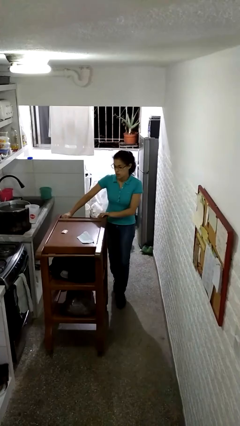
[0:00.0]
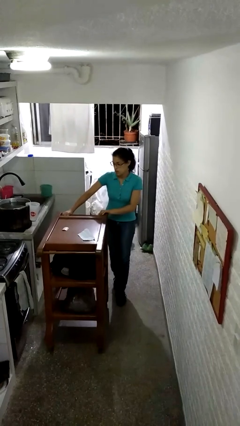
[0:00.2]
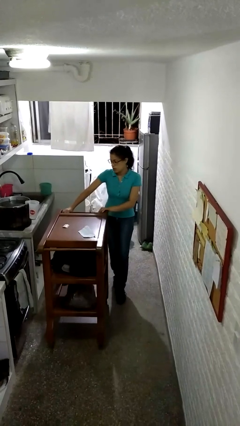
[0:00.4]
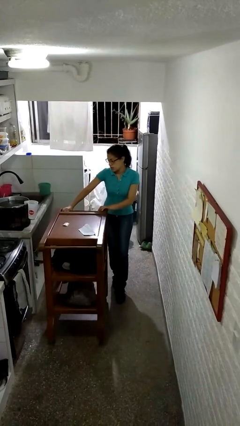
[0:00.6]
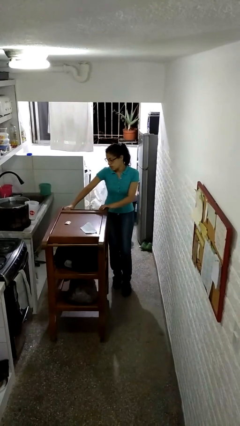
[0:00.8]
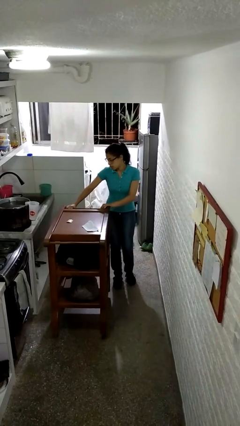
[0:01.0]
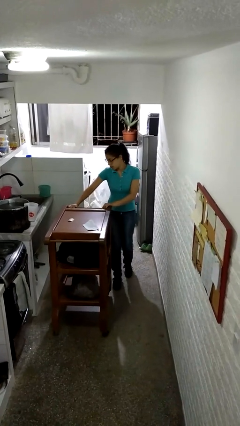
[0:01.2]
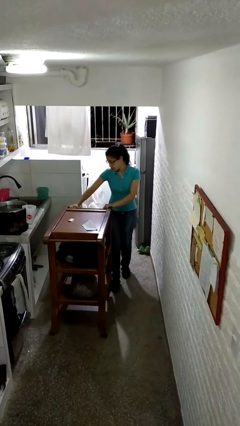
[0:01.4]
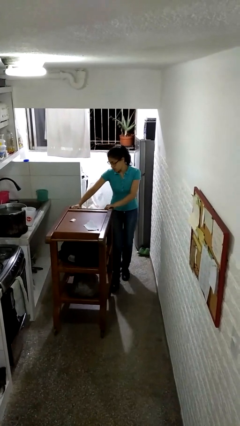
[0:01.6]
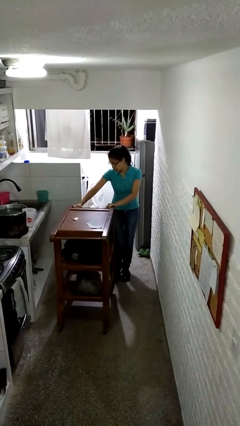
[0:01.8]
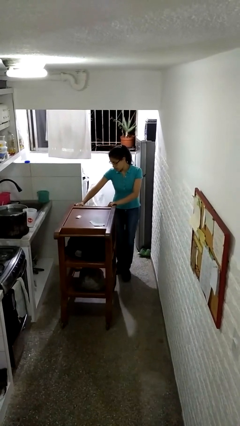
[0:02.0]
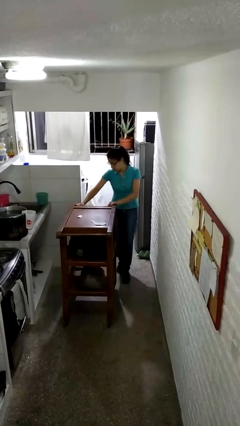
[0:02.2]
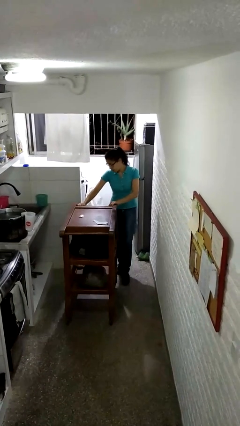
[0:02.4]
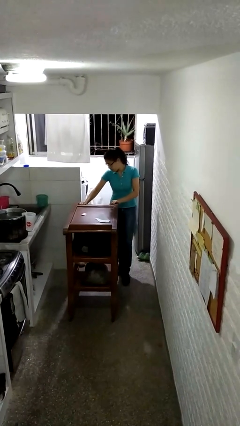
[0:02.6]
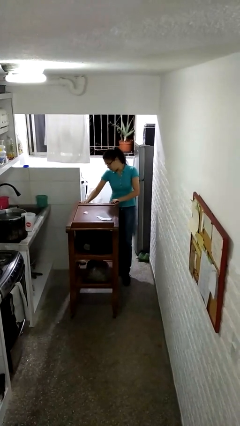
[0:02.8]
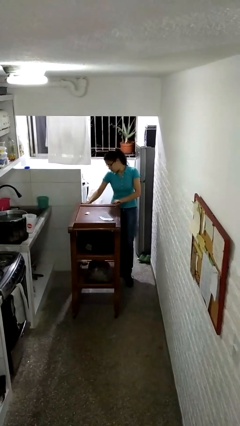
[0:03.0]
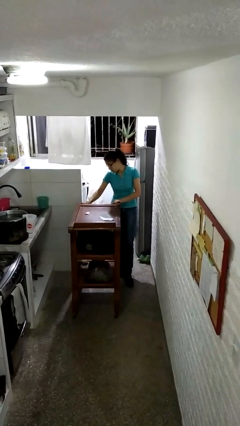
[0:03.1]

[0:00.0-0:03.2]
person pulls wheeled cart

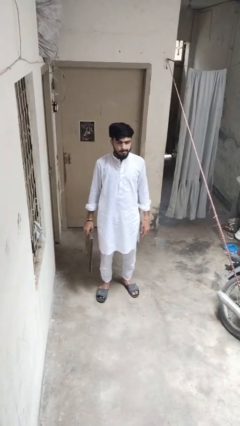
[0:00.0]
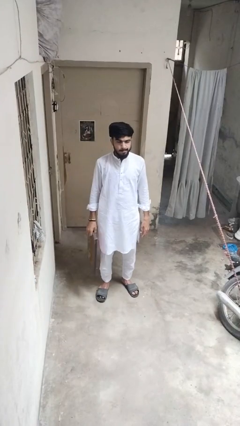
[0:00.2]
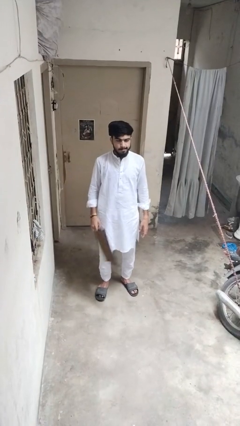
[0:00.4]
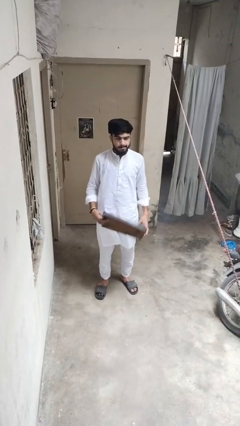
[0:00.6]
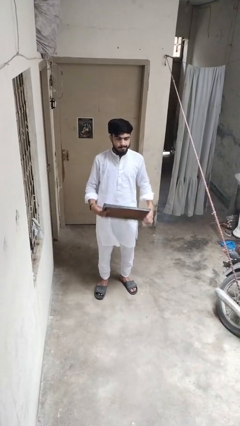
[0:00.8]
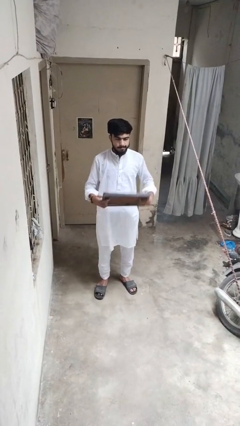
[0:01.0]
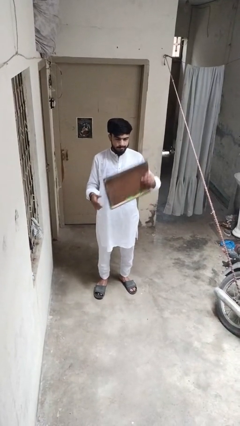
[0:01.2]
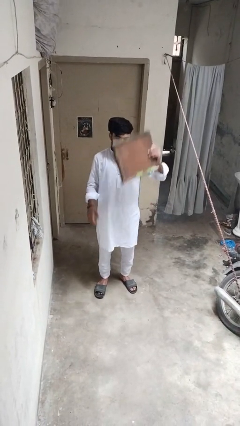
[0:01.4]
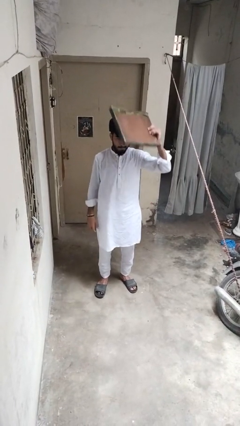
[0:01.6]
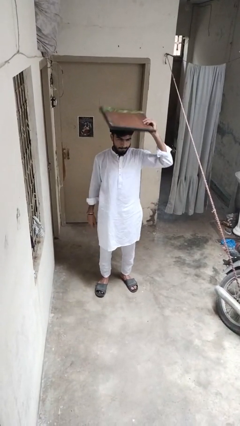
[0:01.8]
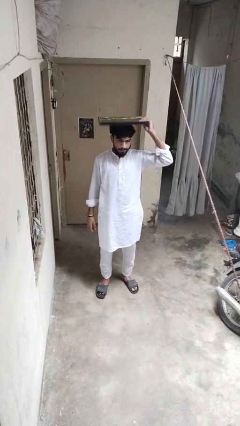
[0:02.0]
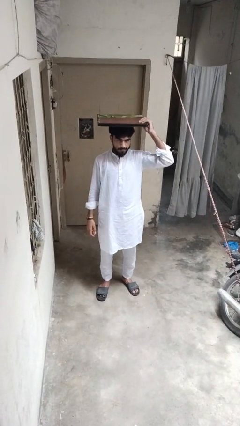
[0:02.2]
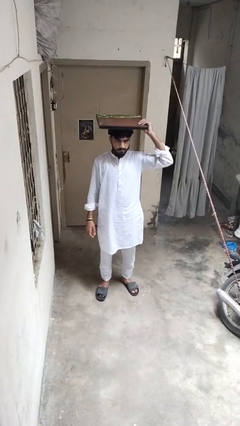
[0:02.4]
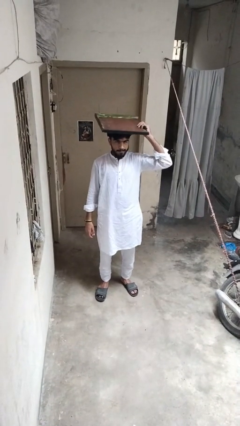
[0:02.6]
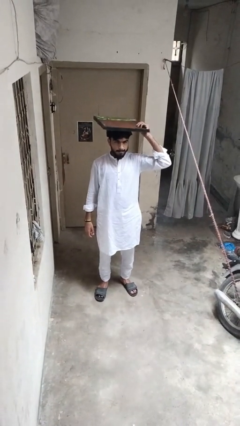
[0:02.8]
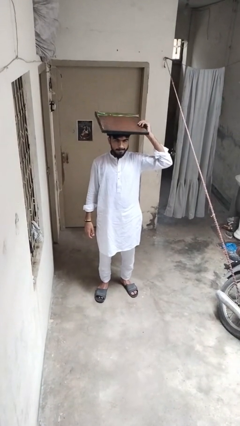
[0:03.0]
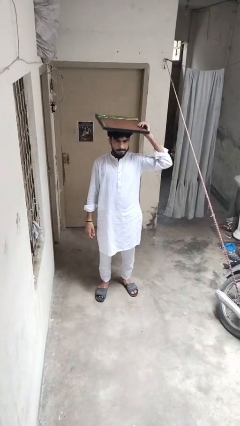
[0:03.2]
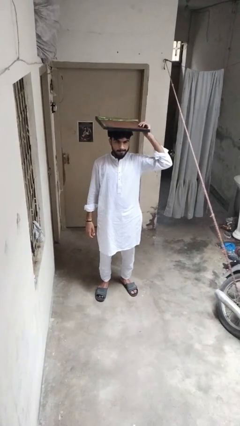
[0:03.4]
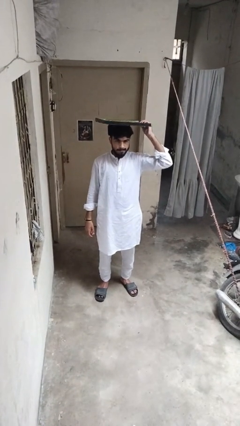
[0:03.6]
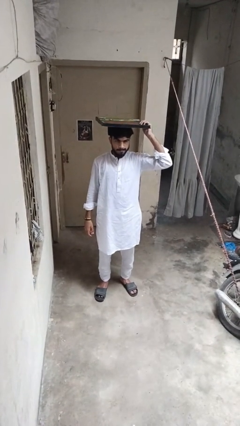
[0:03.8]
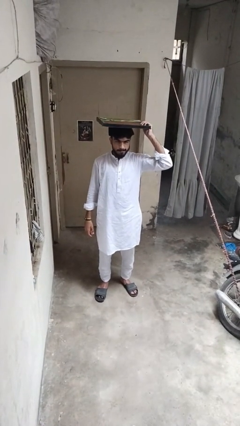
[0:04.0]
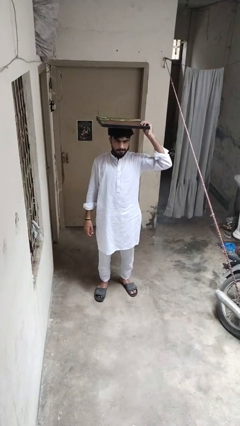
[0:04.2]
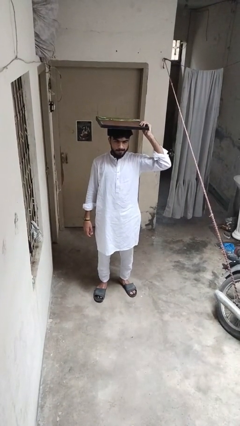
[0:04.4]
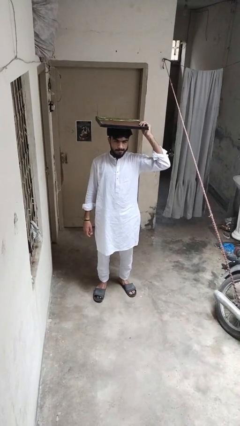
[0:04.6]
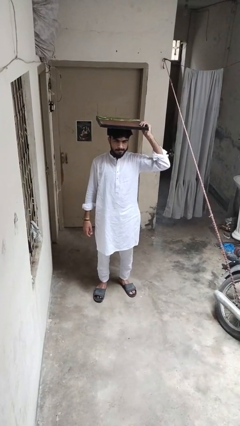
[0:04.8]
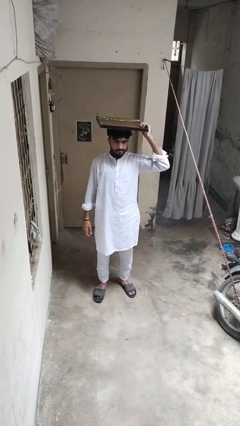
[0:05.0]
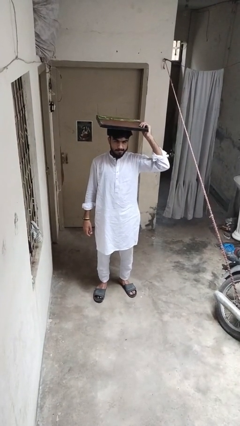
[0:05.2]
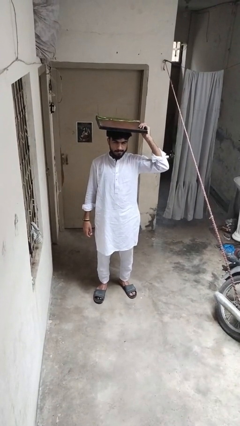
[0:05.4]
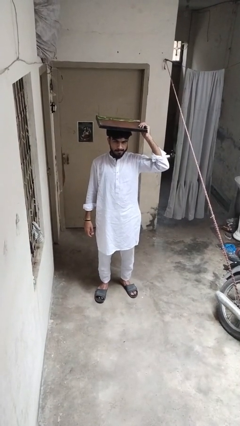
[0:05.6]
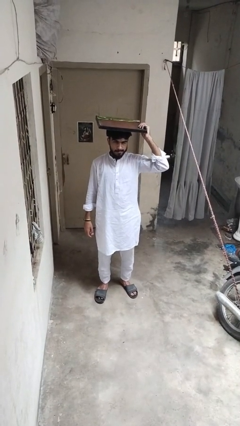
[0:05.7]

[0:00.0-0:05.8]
person holds object above head

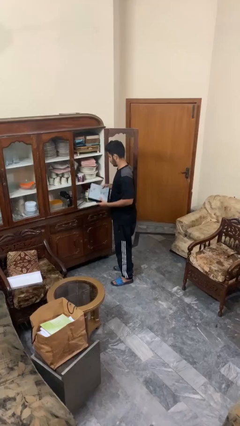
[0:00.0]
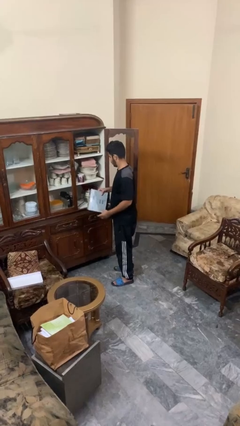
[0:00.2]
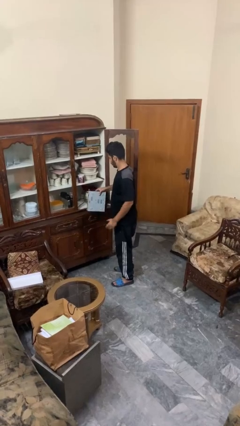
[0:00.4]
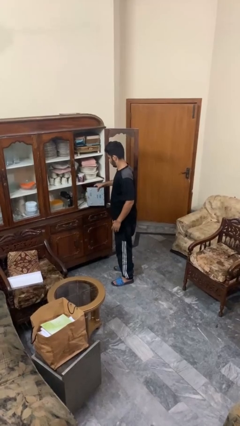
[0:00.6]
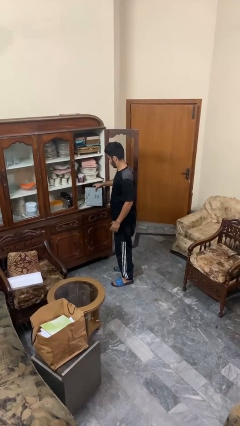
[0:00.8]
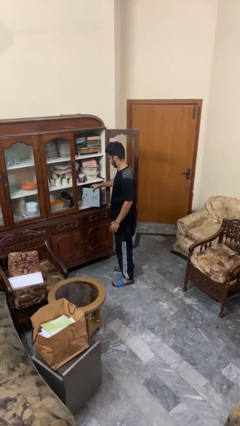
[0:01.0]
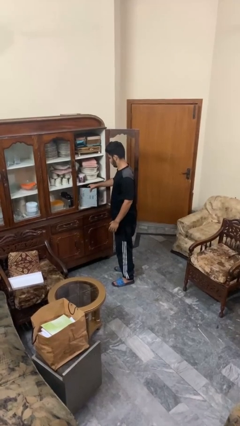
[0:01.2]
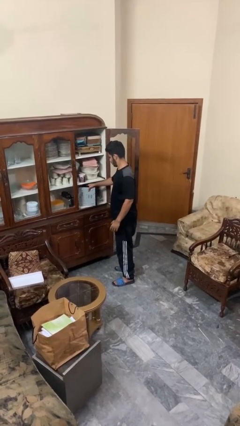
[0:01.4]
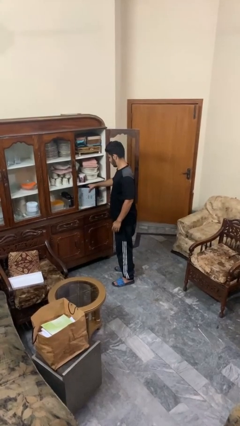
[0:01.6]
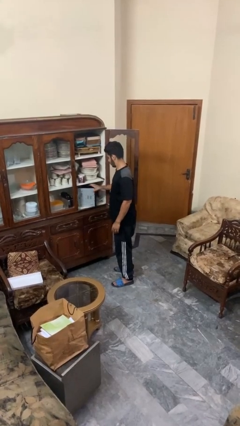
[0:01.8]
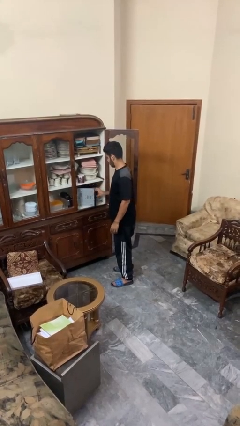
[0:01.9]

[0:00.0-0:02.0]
person puts down object into cabinet

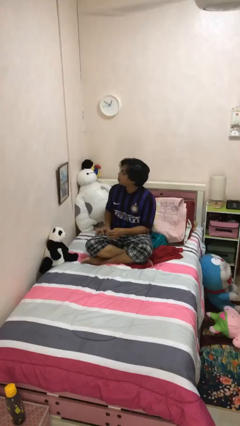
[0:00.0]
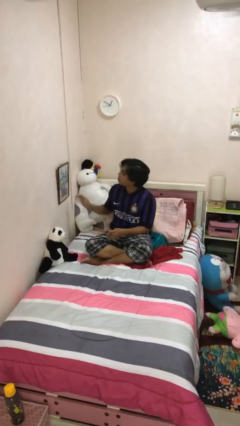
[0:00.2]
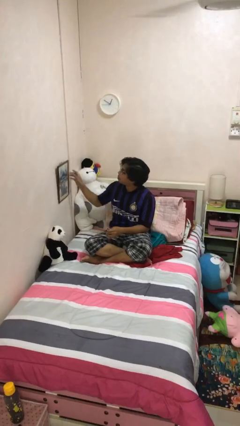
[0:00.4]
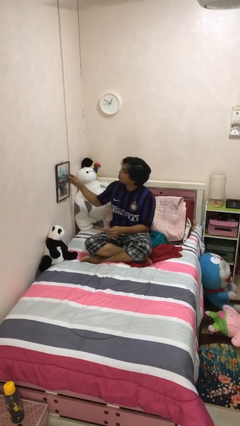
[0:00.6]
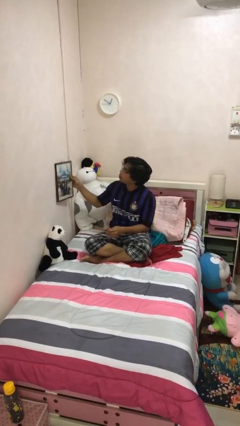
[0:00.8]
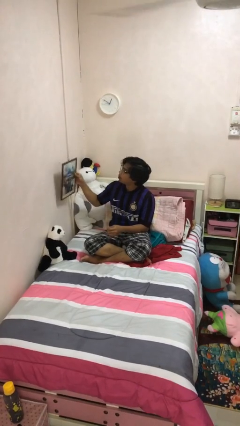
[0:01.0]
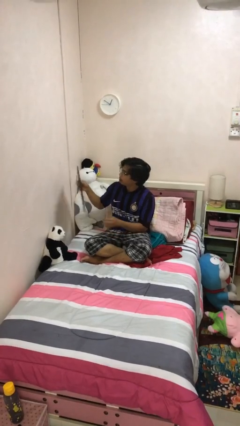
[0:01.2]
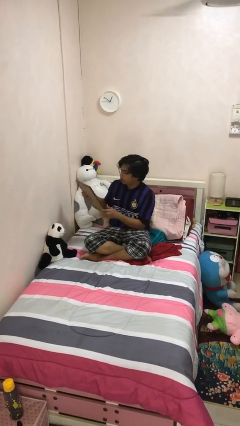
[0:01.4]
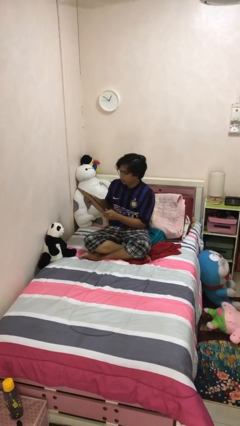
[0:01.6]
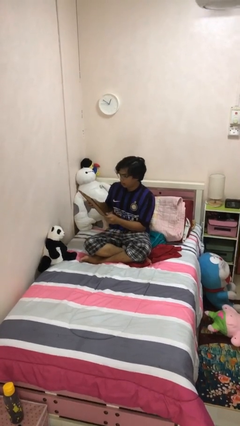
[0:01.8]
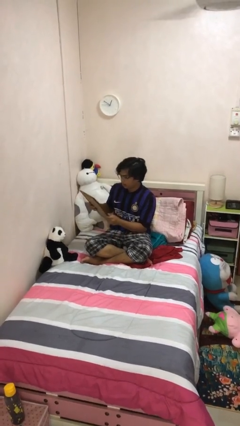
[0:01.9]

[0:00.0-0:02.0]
person takes down picture frame

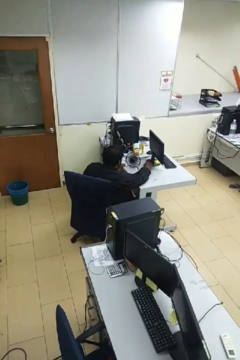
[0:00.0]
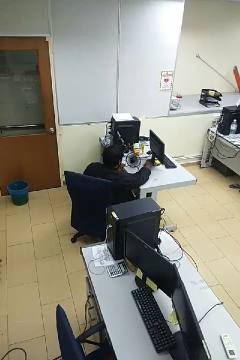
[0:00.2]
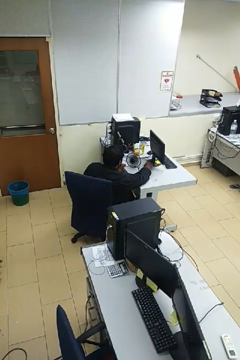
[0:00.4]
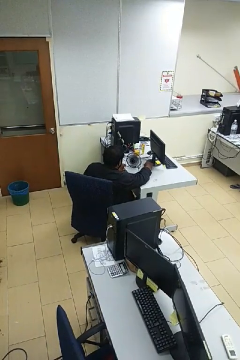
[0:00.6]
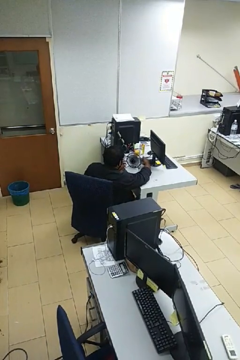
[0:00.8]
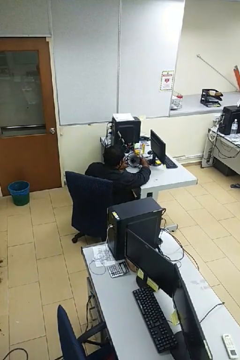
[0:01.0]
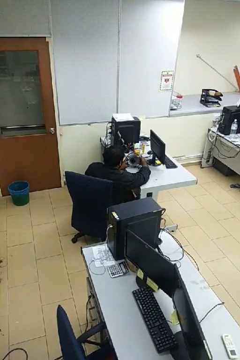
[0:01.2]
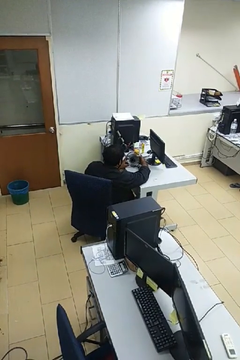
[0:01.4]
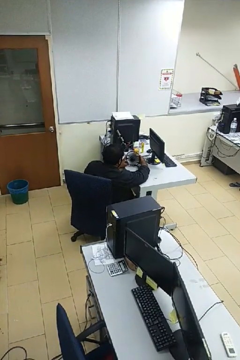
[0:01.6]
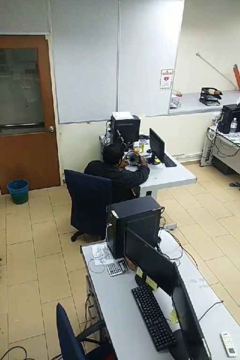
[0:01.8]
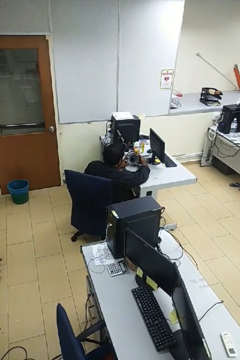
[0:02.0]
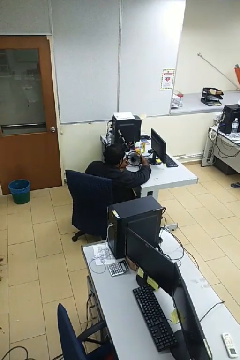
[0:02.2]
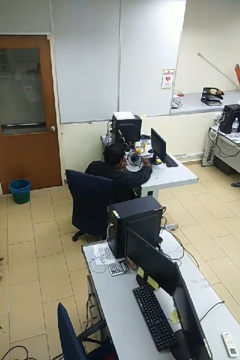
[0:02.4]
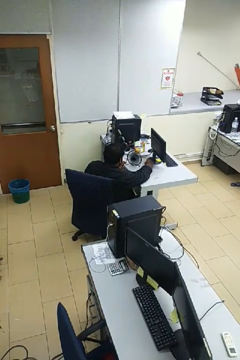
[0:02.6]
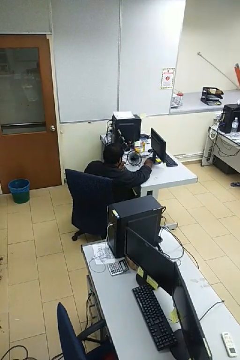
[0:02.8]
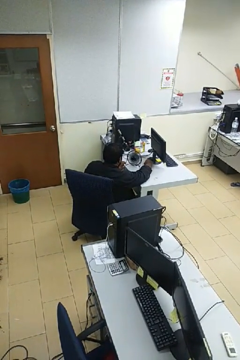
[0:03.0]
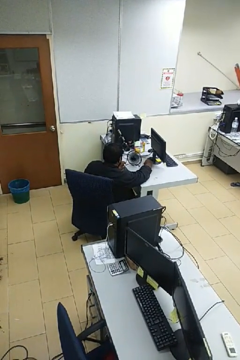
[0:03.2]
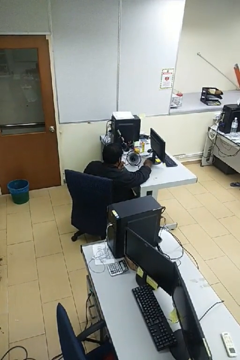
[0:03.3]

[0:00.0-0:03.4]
person turns off fan

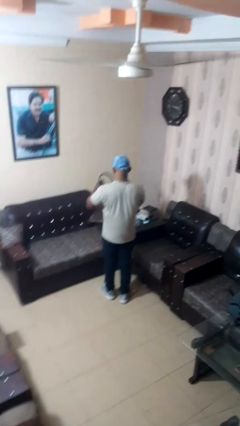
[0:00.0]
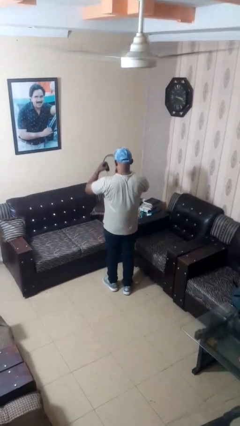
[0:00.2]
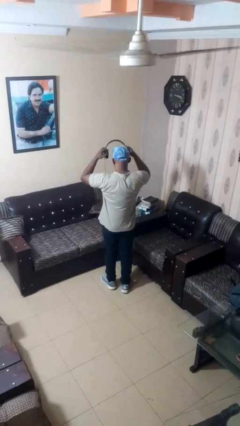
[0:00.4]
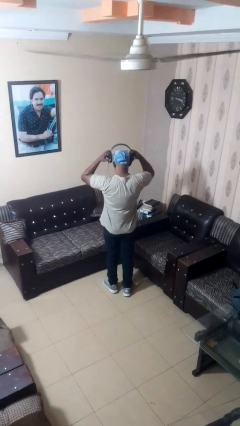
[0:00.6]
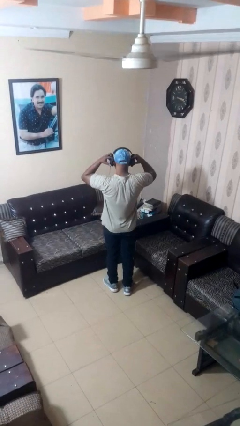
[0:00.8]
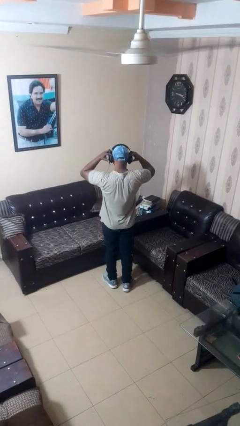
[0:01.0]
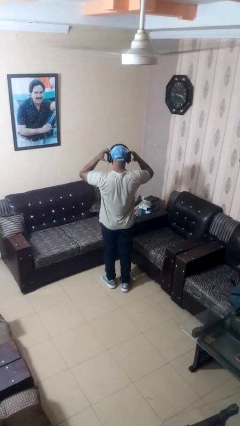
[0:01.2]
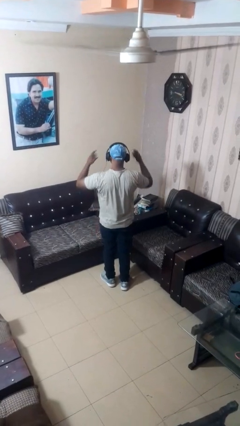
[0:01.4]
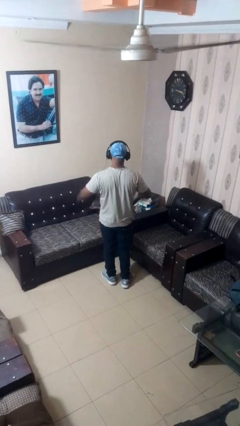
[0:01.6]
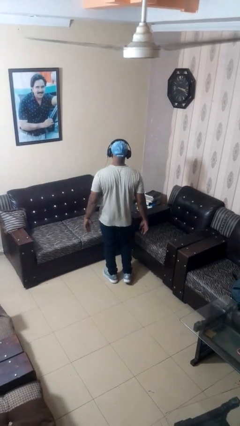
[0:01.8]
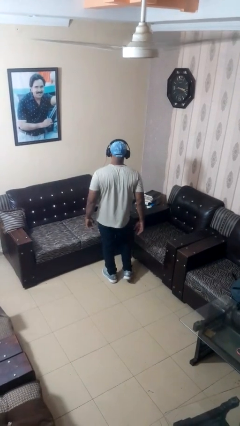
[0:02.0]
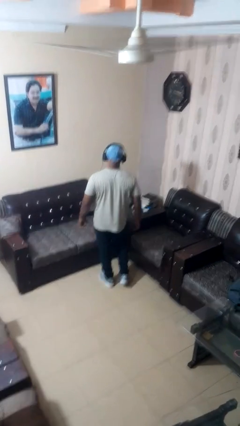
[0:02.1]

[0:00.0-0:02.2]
person puts on headphones
